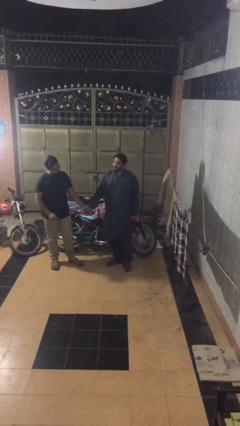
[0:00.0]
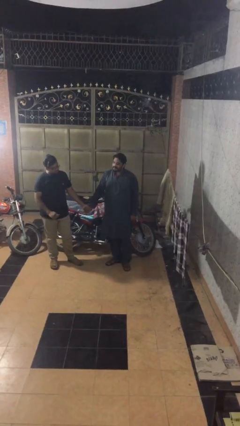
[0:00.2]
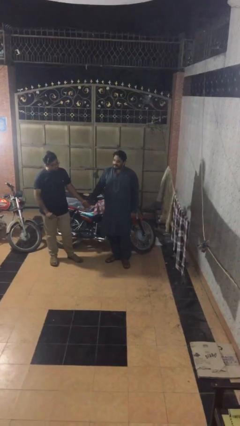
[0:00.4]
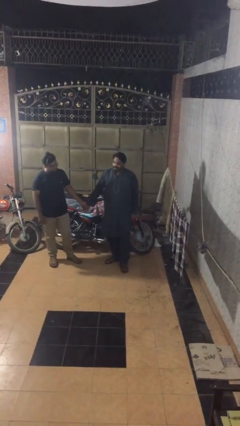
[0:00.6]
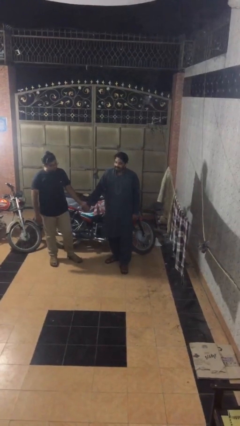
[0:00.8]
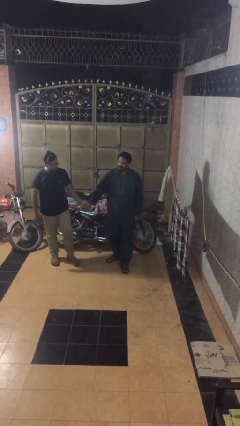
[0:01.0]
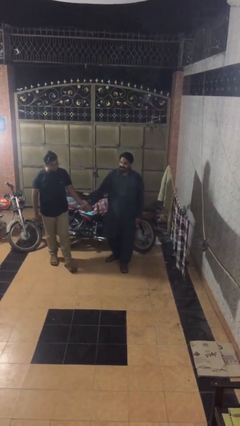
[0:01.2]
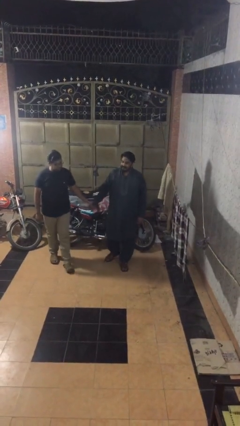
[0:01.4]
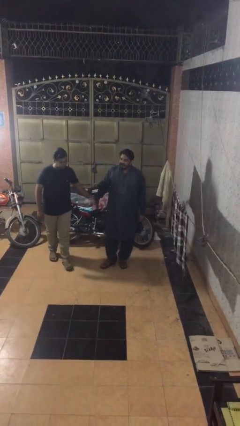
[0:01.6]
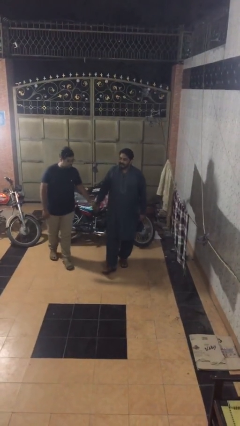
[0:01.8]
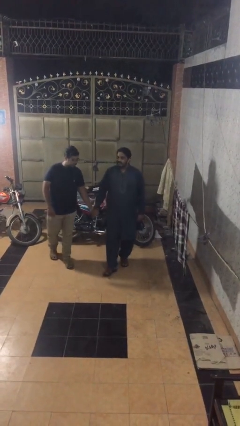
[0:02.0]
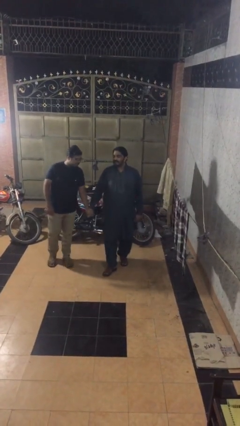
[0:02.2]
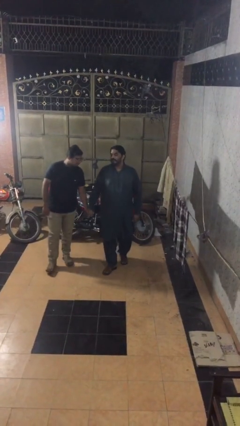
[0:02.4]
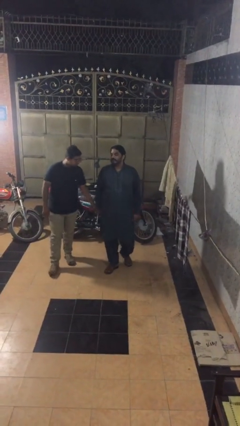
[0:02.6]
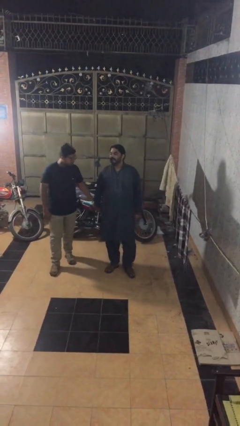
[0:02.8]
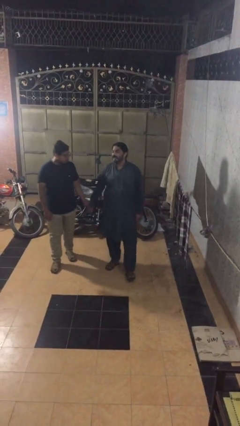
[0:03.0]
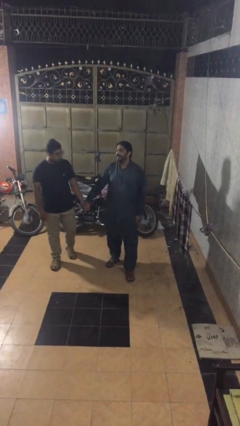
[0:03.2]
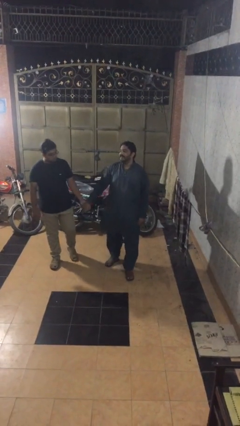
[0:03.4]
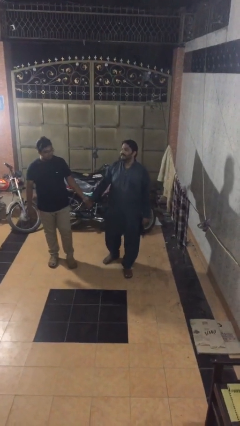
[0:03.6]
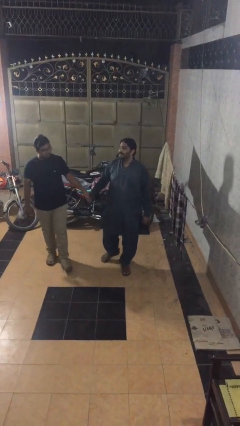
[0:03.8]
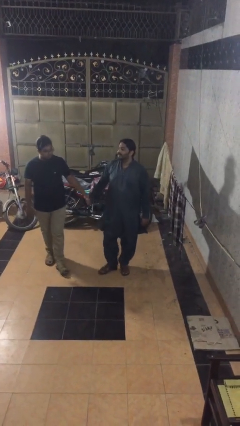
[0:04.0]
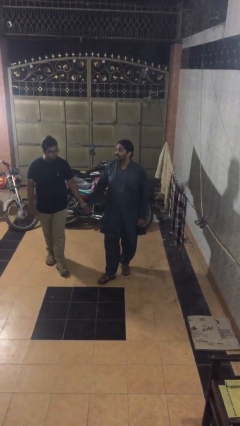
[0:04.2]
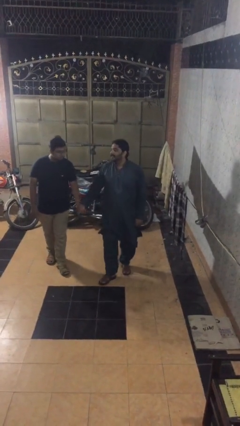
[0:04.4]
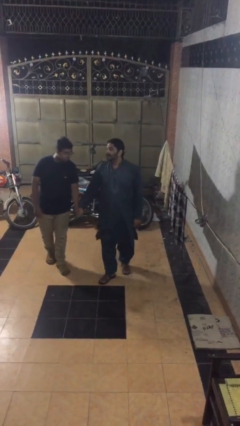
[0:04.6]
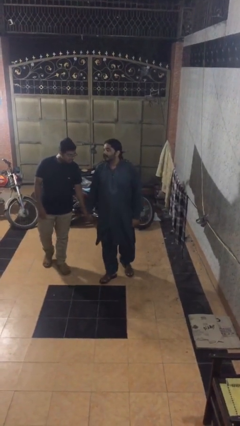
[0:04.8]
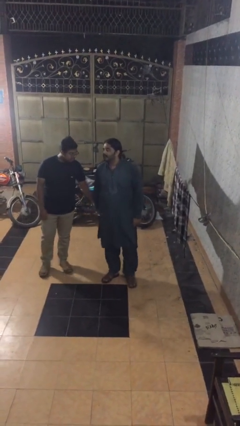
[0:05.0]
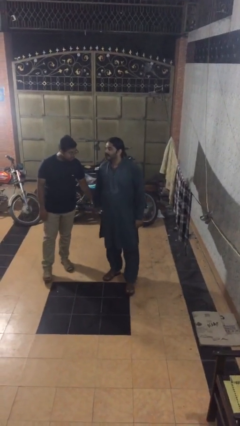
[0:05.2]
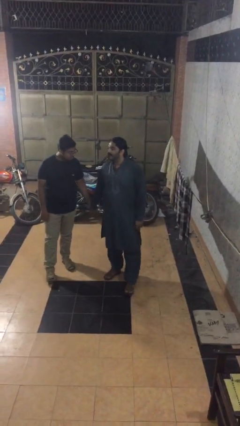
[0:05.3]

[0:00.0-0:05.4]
person holds hand

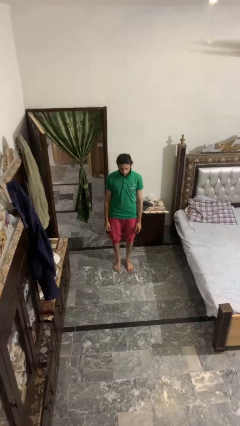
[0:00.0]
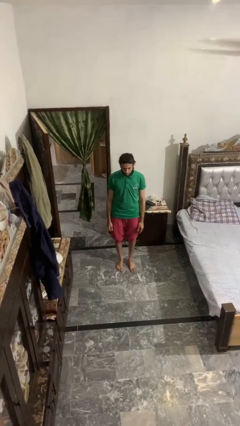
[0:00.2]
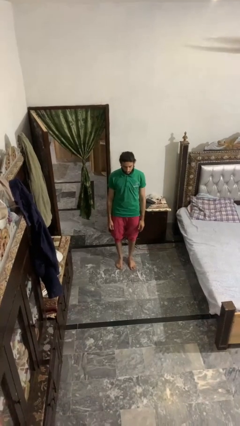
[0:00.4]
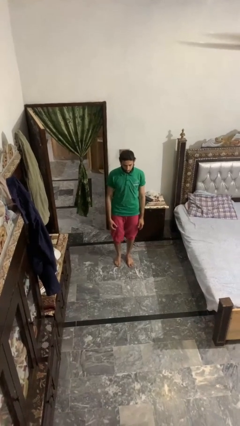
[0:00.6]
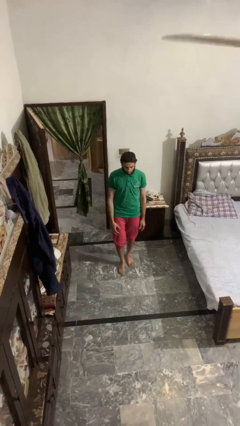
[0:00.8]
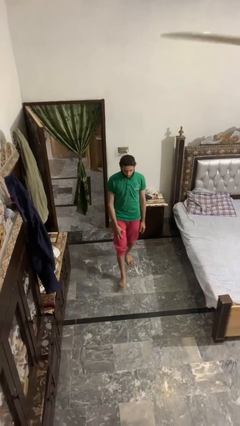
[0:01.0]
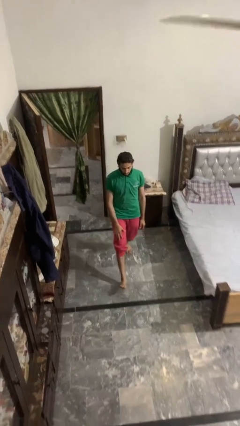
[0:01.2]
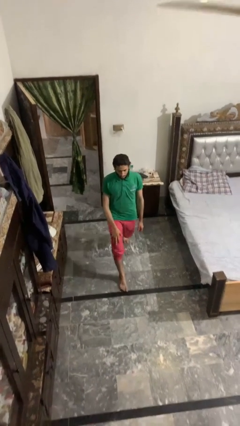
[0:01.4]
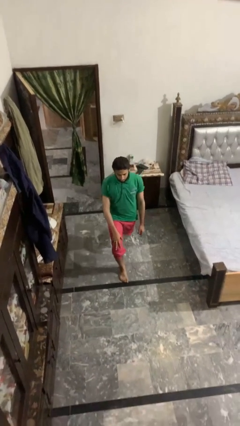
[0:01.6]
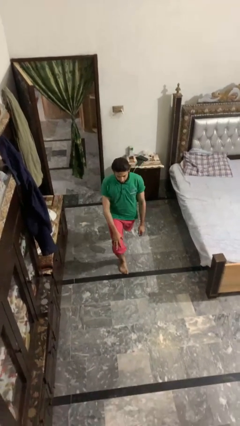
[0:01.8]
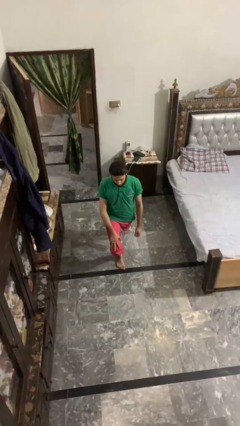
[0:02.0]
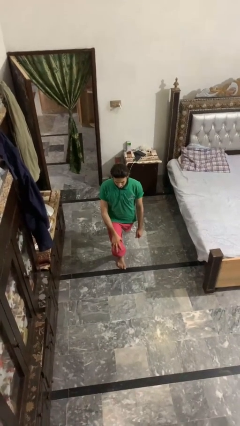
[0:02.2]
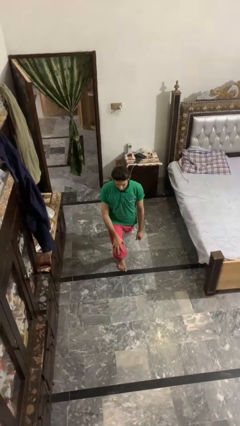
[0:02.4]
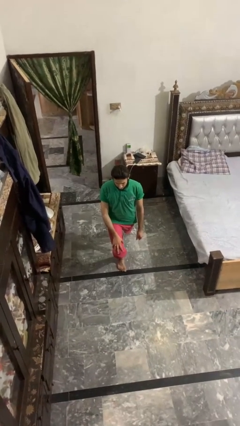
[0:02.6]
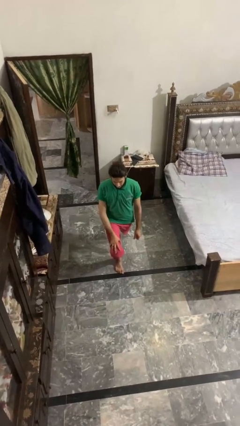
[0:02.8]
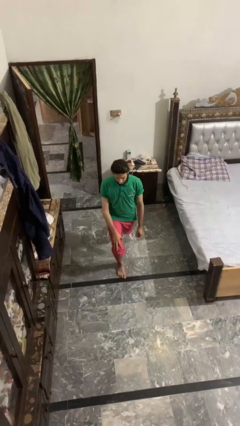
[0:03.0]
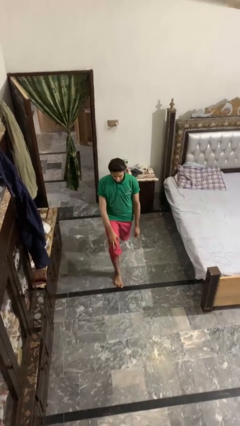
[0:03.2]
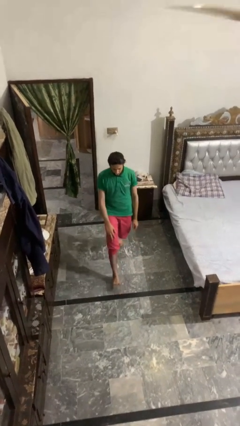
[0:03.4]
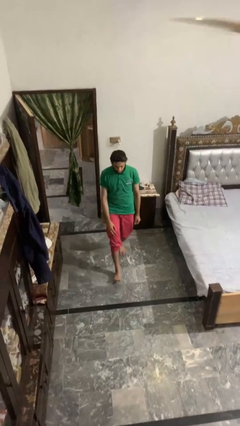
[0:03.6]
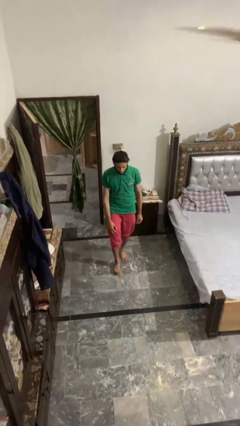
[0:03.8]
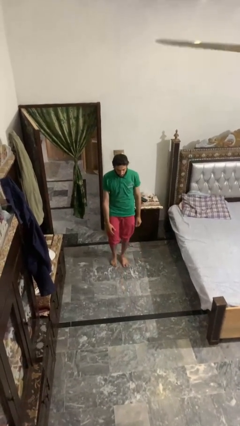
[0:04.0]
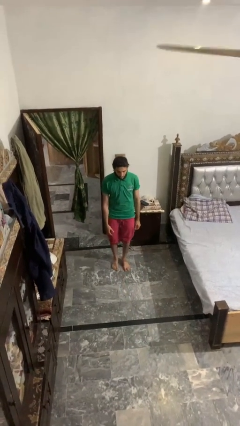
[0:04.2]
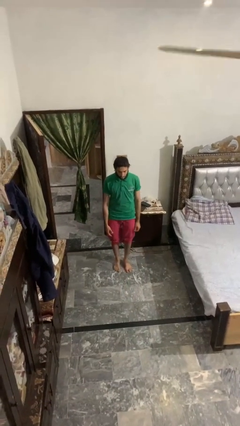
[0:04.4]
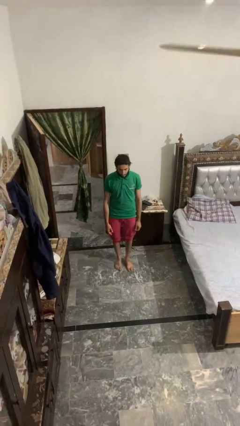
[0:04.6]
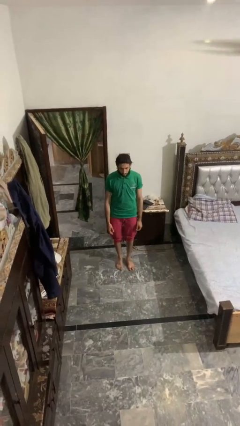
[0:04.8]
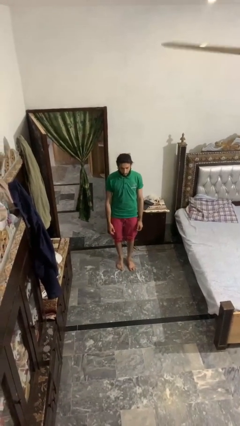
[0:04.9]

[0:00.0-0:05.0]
person exercises with lunges

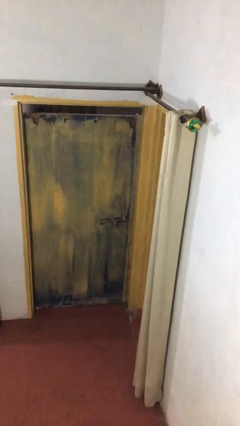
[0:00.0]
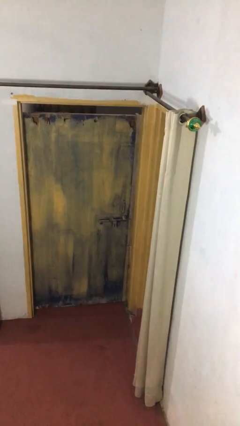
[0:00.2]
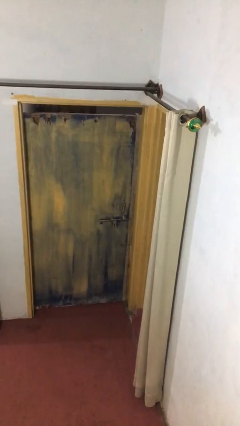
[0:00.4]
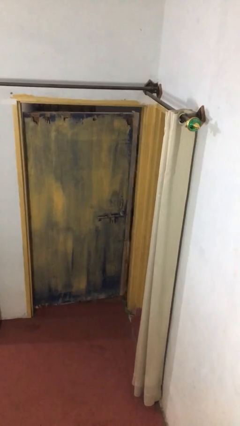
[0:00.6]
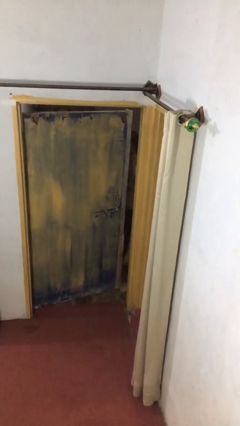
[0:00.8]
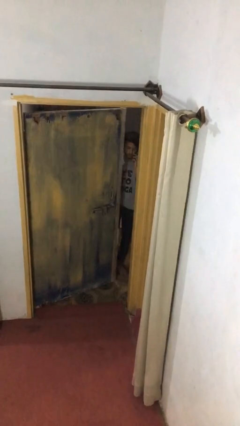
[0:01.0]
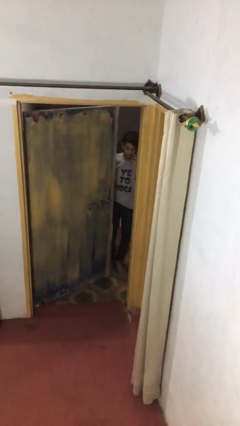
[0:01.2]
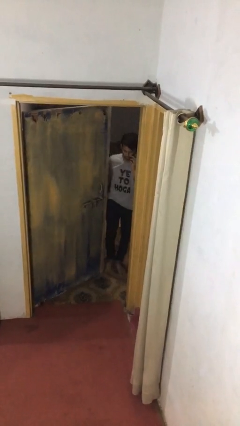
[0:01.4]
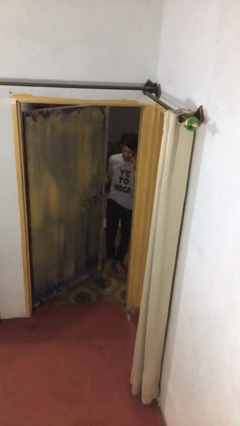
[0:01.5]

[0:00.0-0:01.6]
person opens facility door

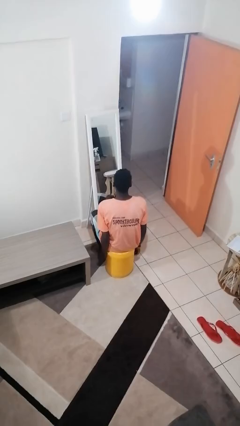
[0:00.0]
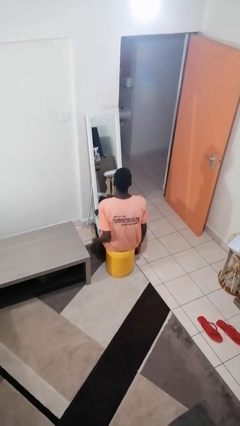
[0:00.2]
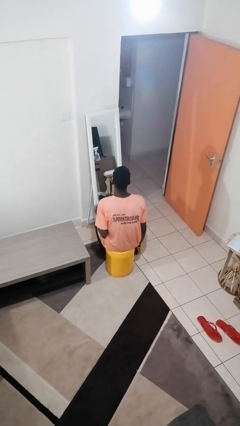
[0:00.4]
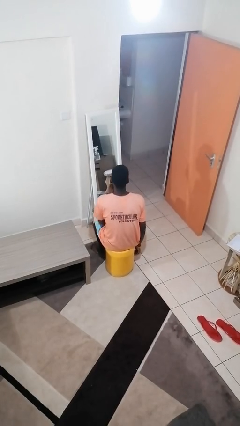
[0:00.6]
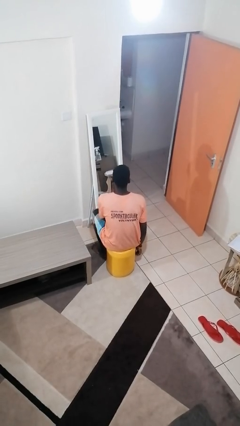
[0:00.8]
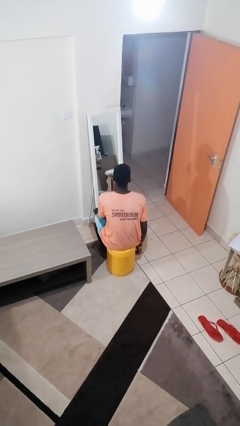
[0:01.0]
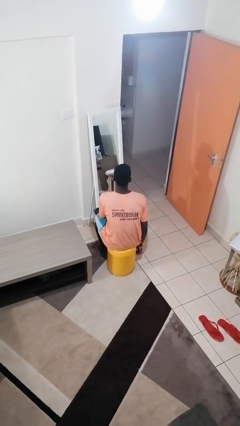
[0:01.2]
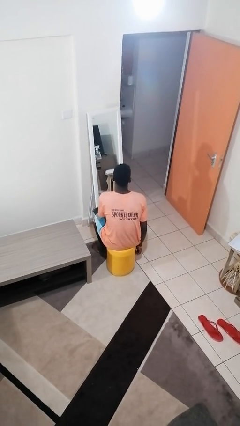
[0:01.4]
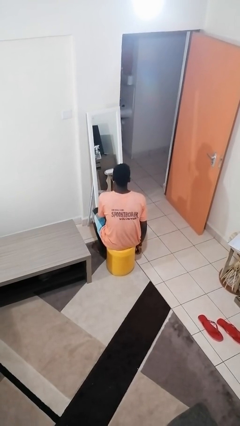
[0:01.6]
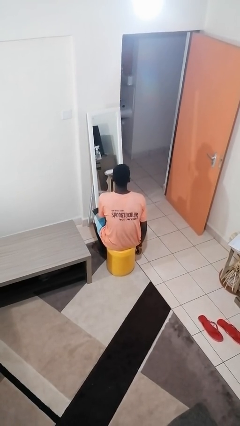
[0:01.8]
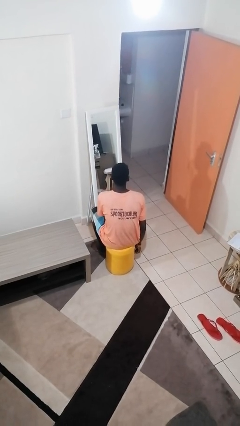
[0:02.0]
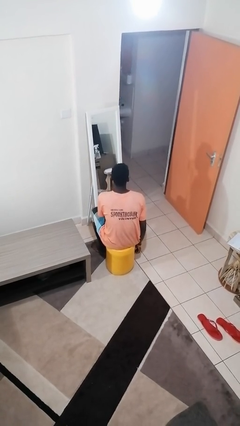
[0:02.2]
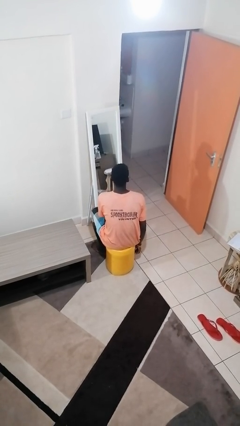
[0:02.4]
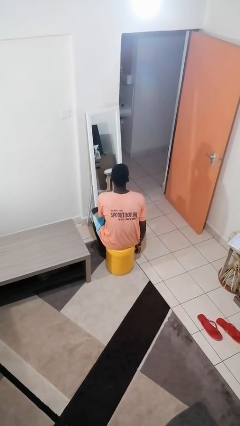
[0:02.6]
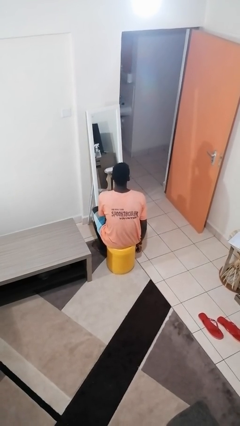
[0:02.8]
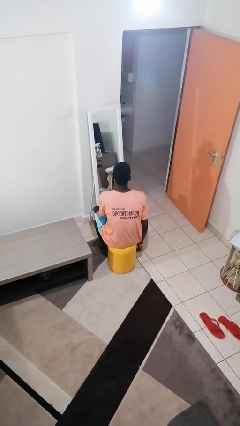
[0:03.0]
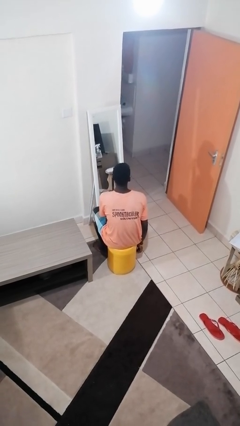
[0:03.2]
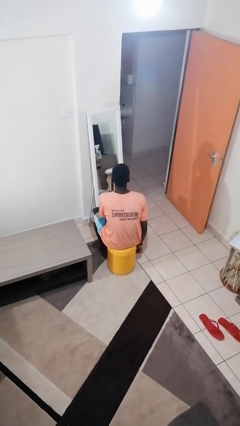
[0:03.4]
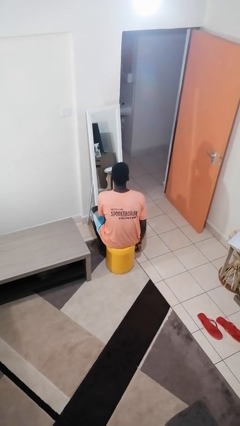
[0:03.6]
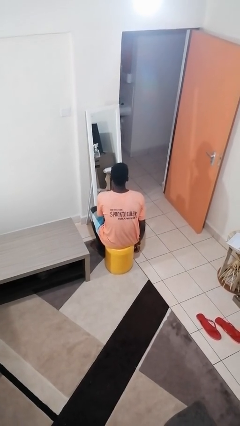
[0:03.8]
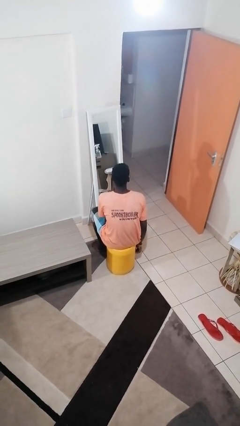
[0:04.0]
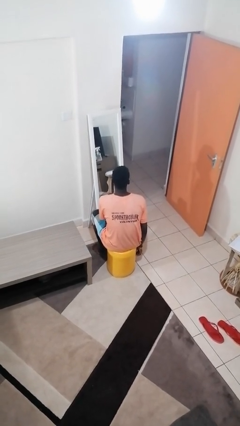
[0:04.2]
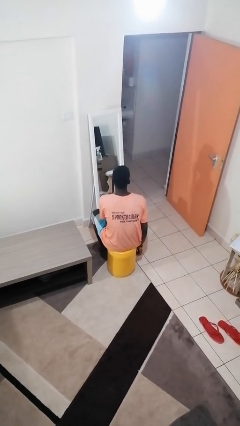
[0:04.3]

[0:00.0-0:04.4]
person applies lip makeup

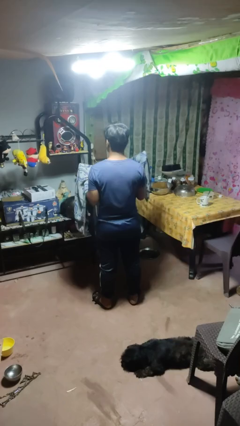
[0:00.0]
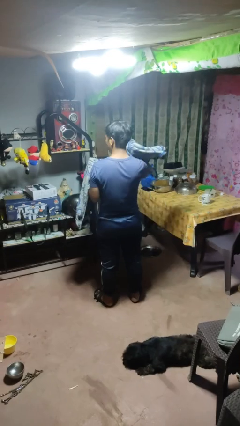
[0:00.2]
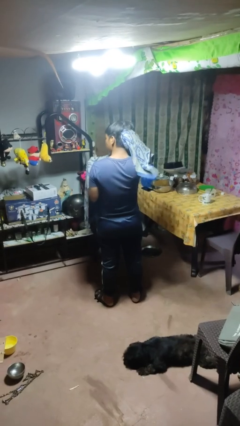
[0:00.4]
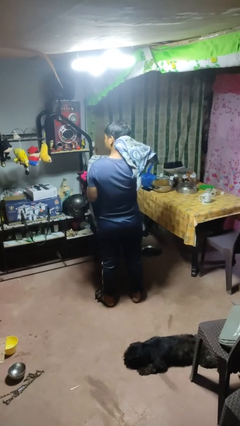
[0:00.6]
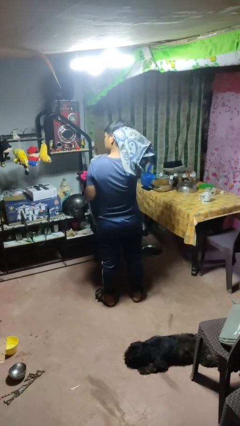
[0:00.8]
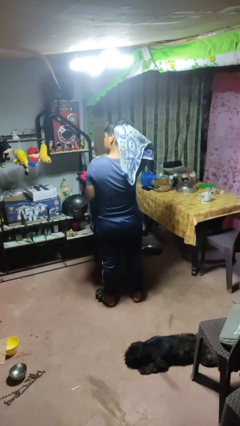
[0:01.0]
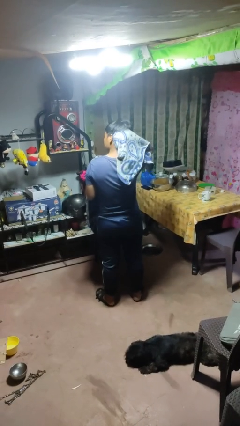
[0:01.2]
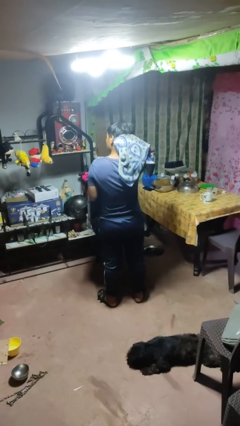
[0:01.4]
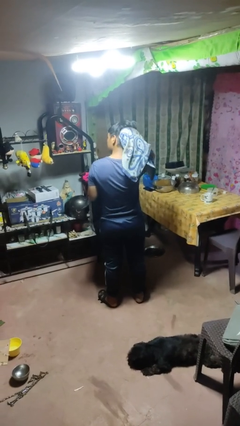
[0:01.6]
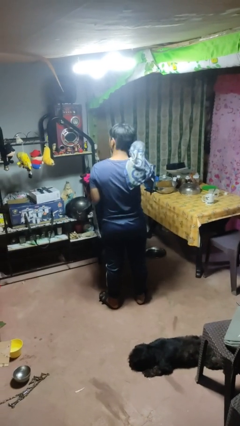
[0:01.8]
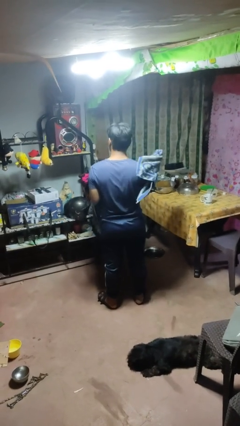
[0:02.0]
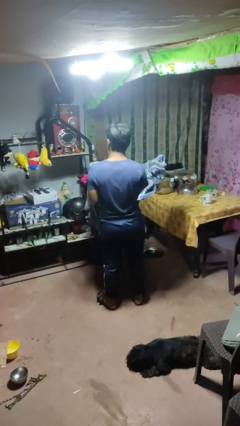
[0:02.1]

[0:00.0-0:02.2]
person dries hair with towel
